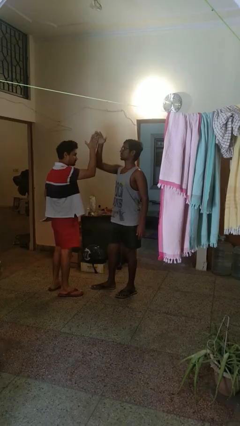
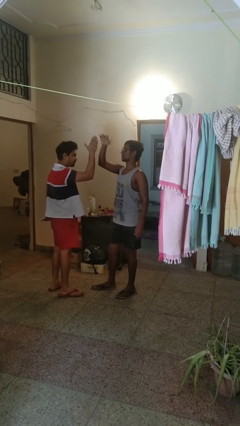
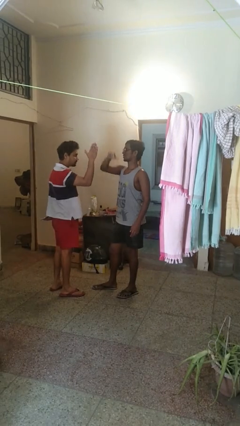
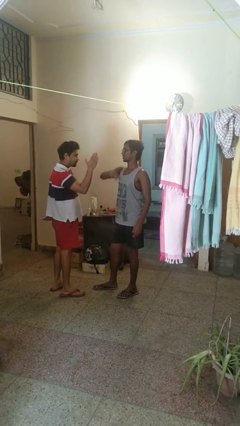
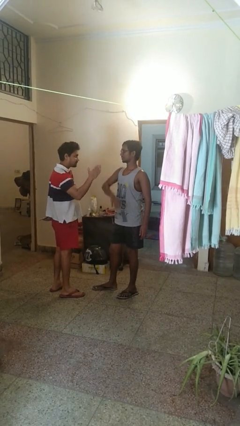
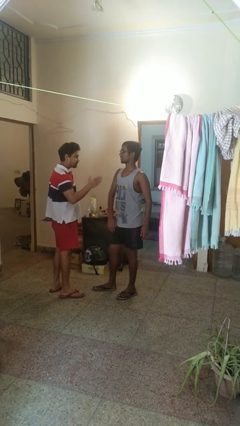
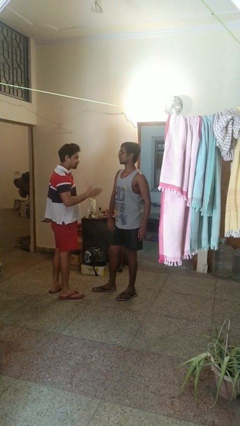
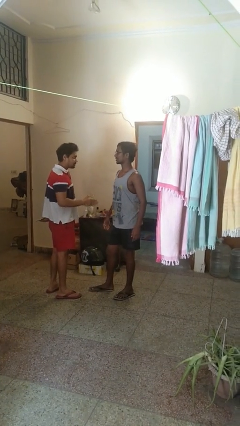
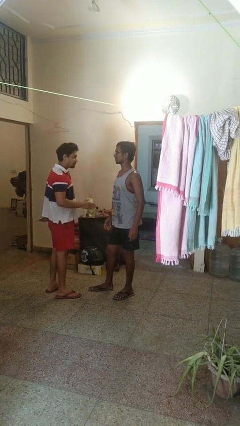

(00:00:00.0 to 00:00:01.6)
person highfives hand

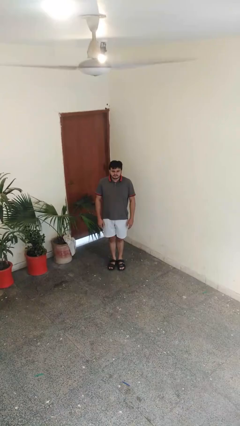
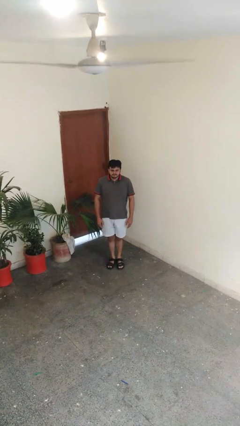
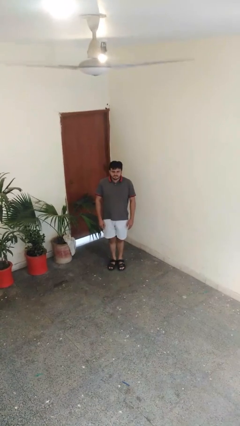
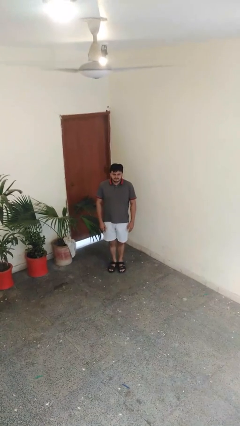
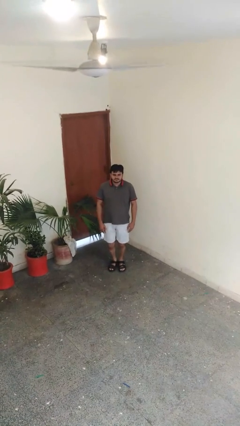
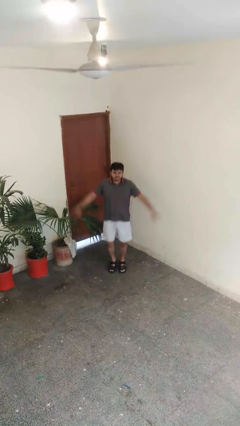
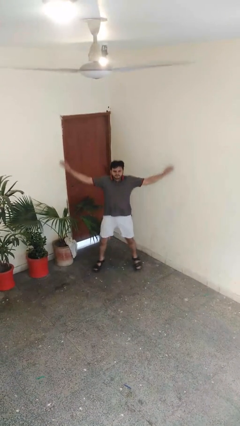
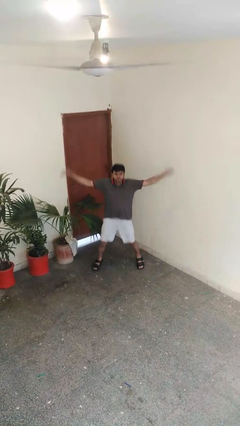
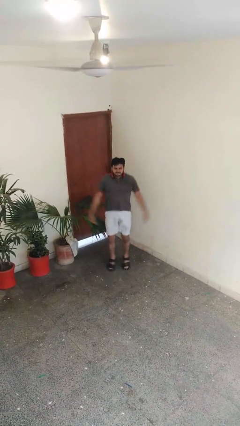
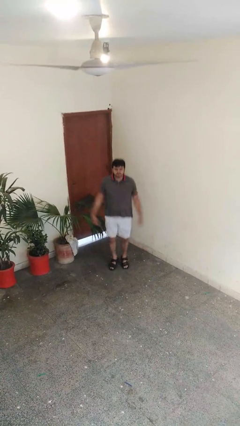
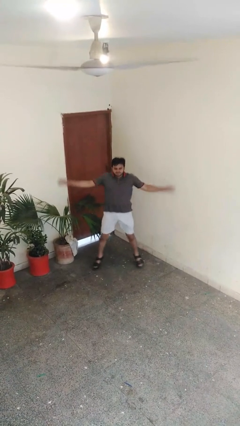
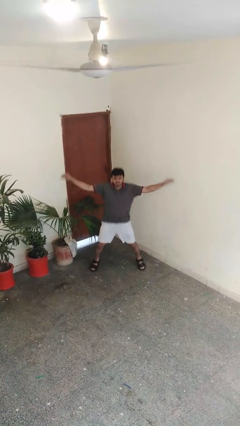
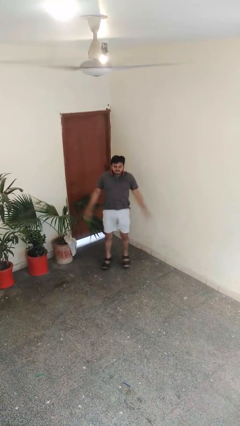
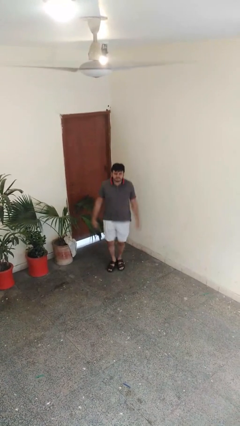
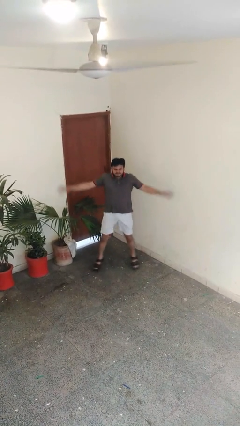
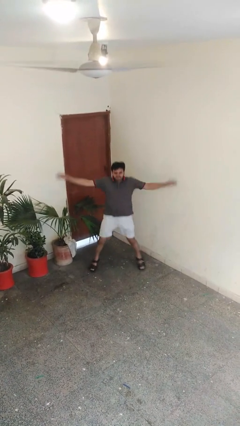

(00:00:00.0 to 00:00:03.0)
person exercises with jumping jacks

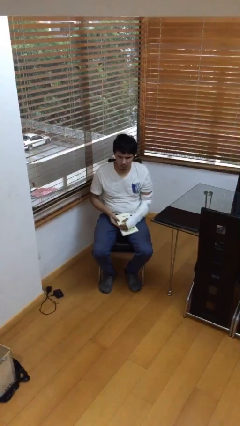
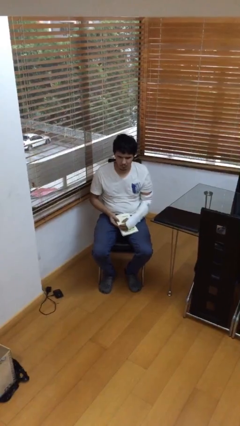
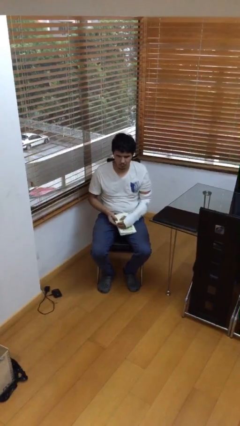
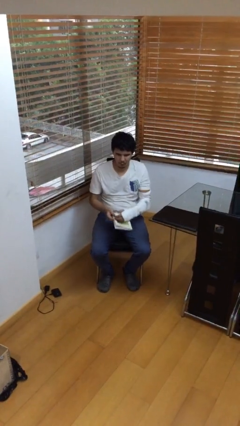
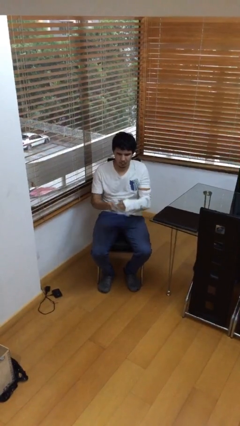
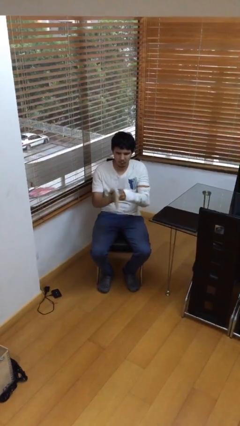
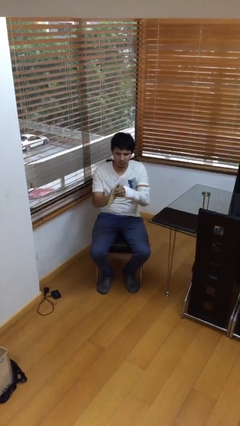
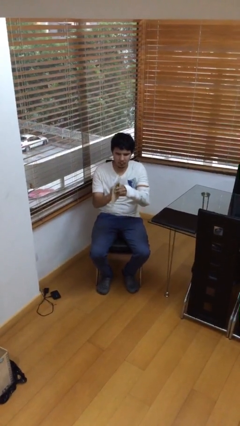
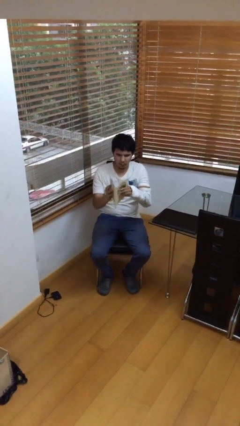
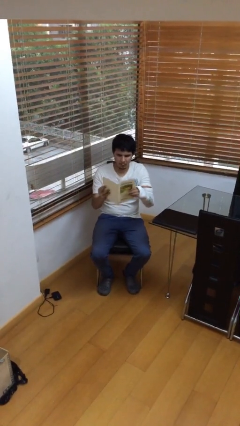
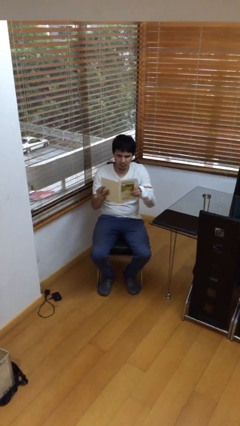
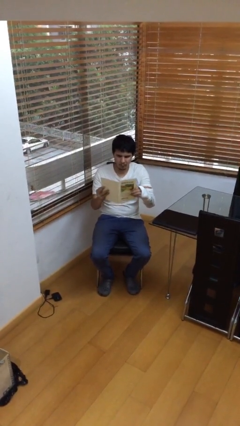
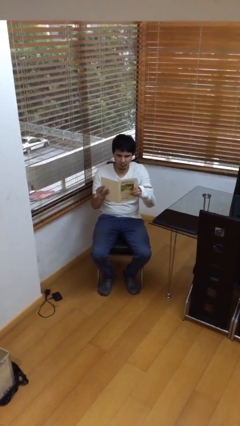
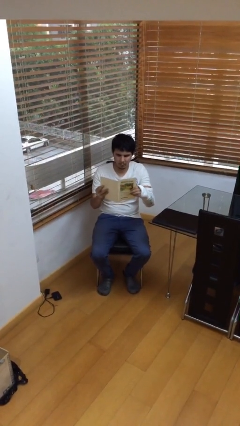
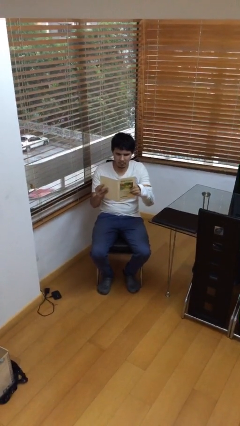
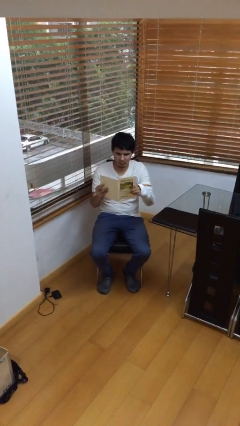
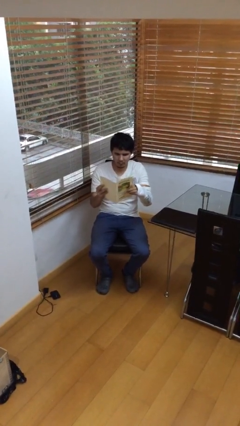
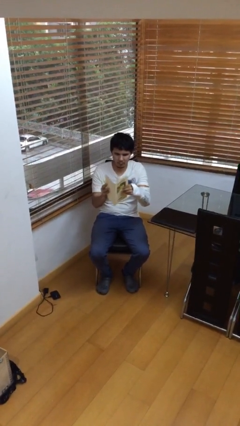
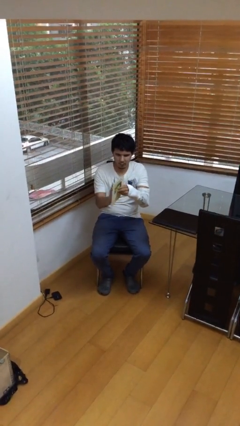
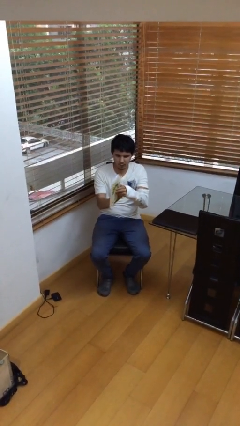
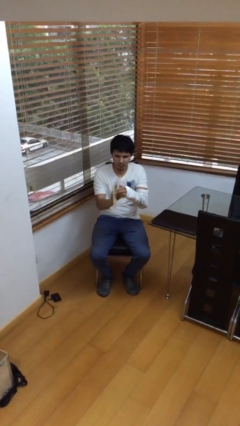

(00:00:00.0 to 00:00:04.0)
person reads document

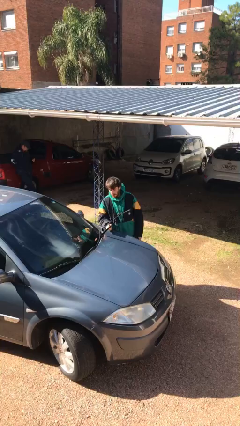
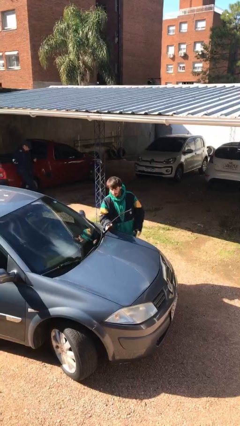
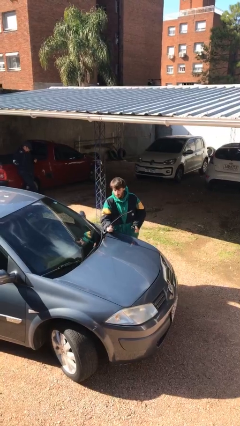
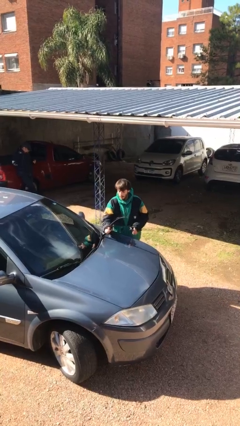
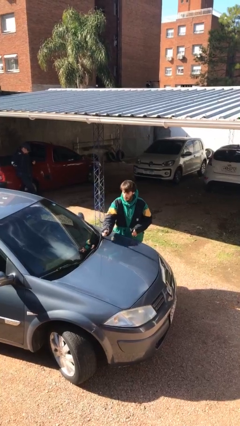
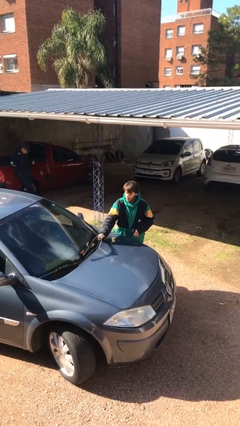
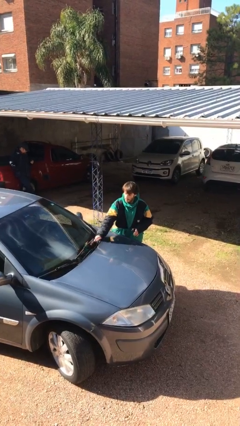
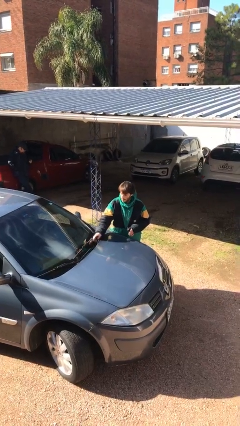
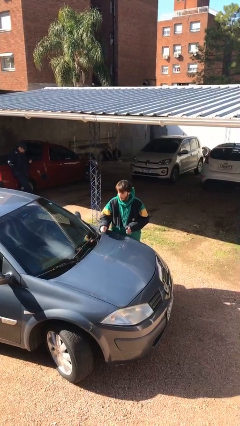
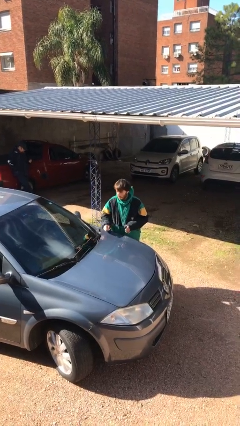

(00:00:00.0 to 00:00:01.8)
person flips down car wipers

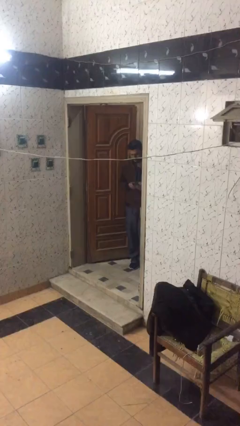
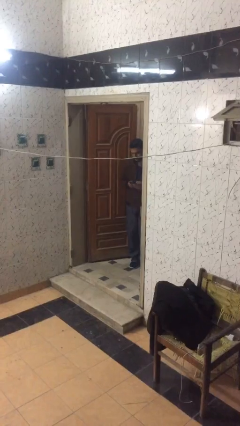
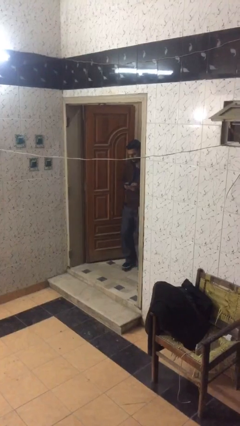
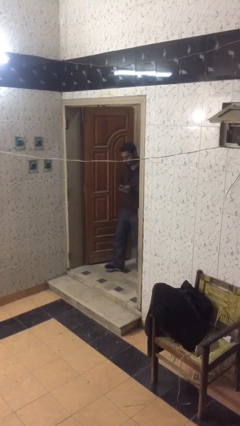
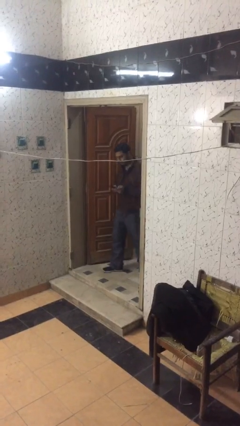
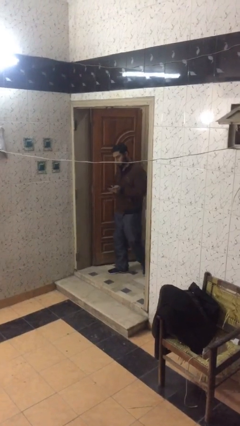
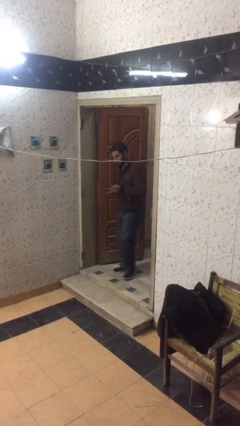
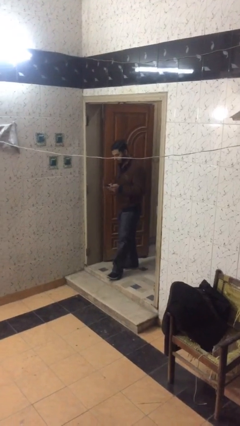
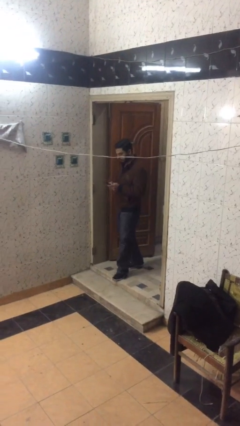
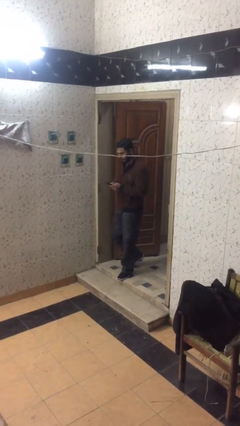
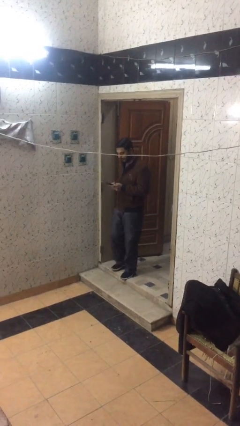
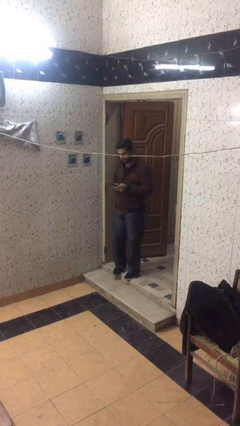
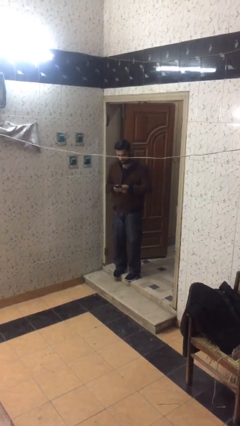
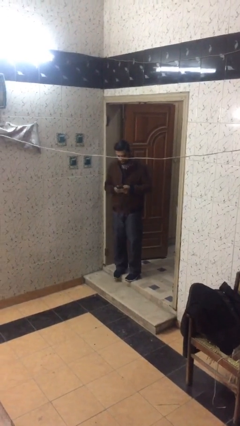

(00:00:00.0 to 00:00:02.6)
person enters scene through structure

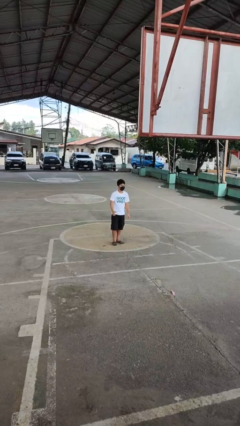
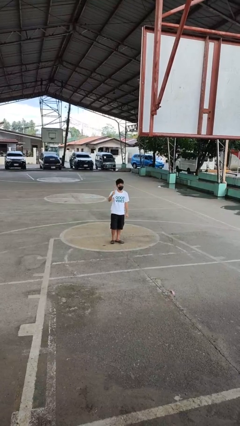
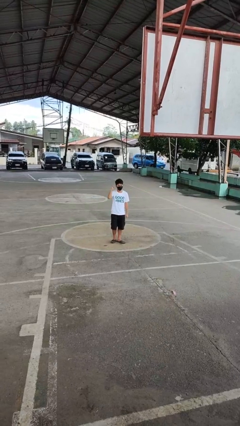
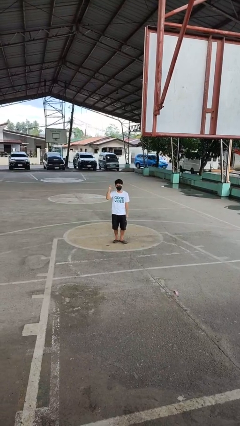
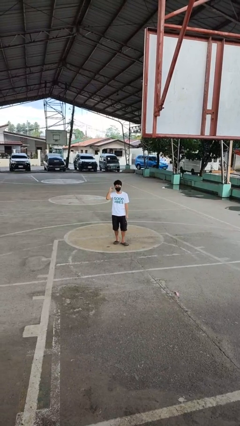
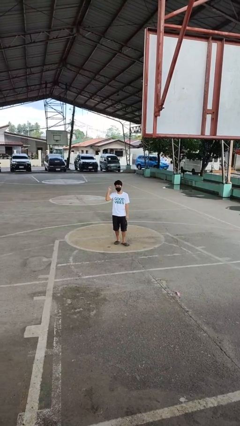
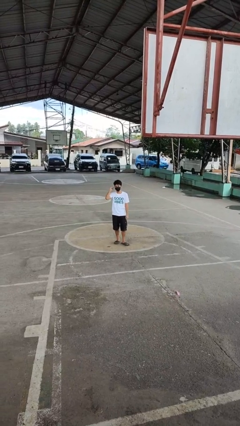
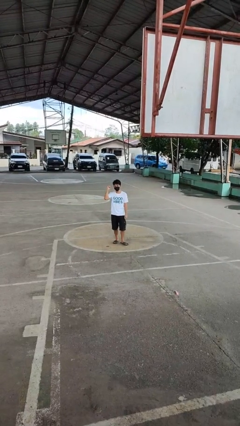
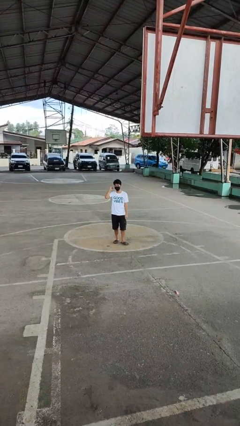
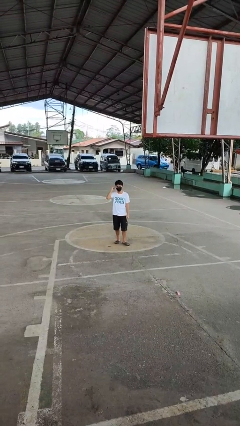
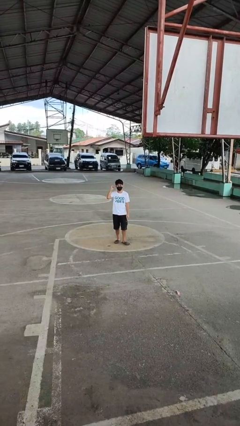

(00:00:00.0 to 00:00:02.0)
person gestures behind me

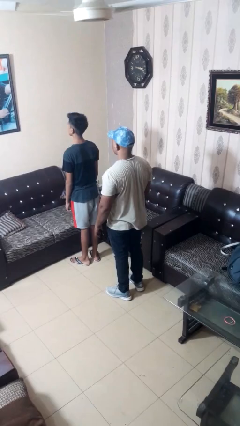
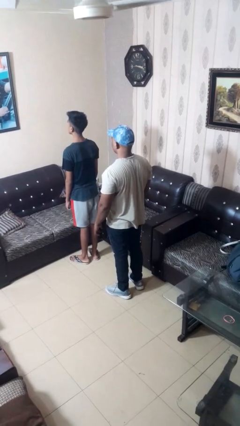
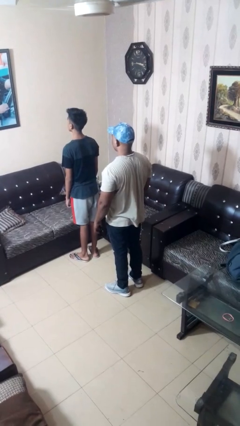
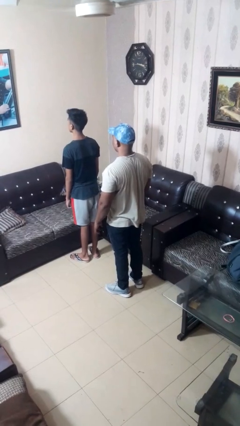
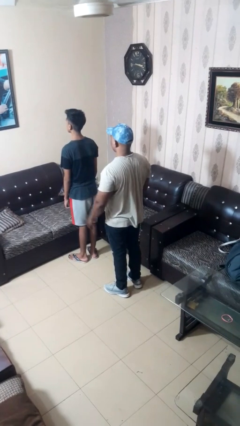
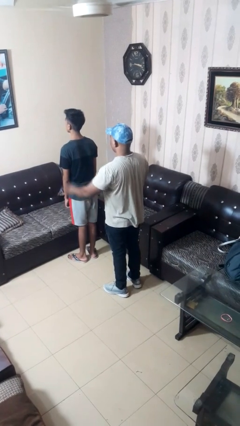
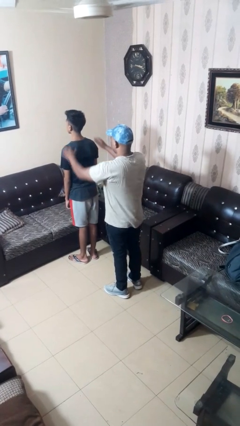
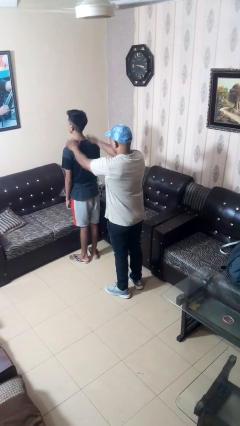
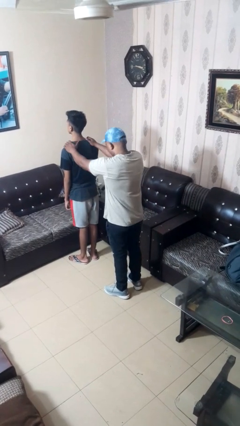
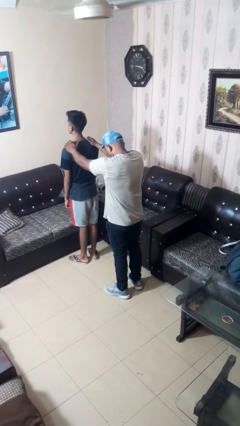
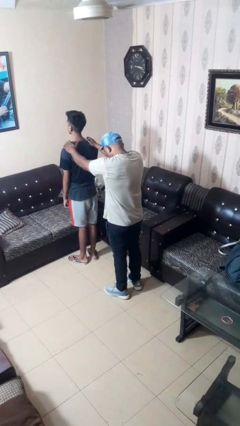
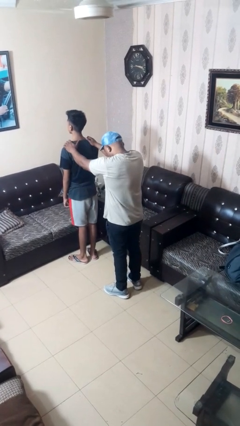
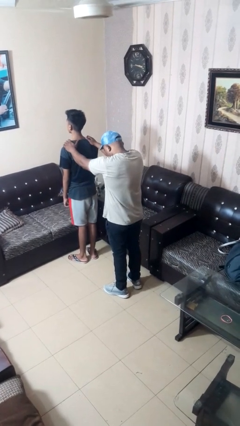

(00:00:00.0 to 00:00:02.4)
person grabs person by shoulder
